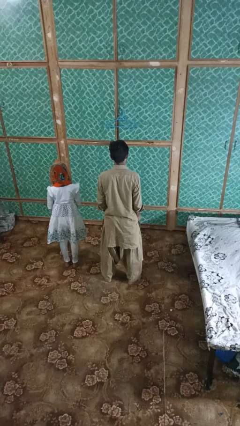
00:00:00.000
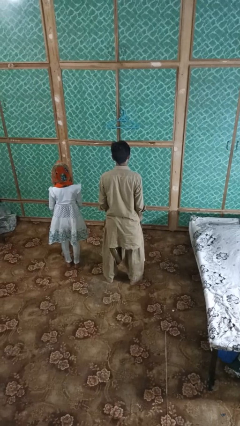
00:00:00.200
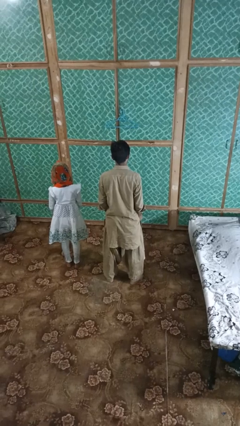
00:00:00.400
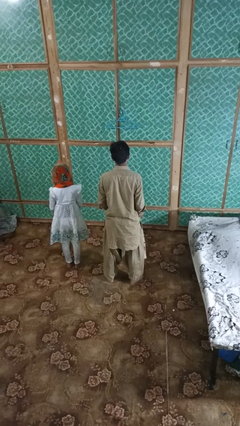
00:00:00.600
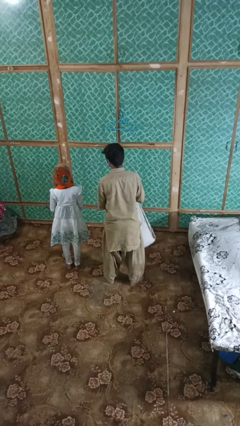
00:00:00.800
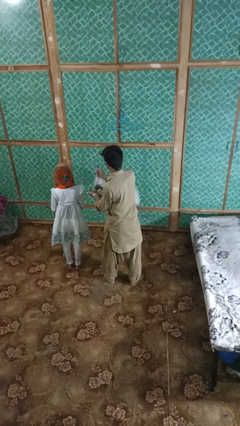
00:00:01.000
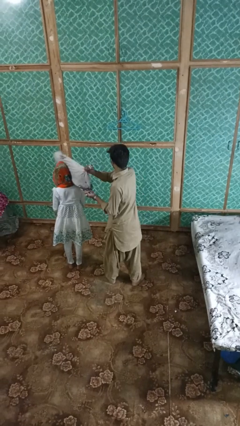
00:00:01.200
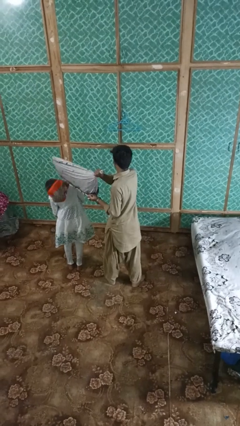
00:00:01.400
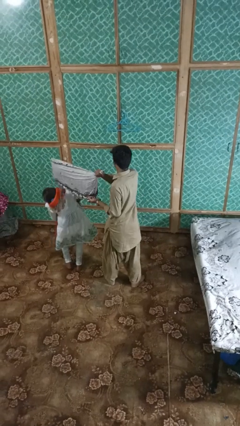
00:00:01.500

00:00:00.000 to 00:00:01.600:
person hits person with pillow

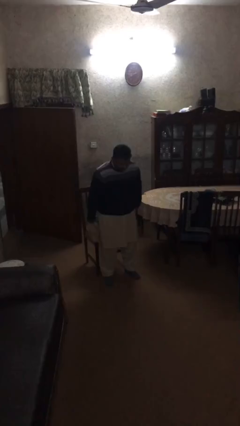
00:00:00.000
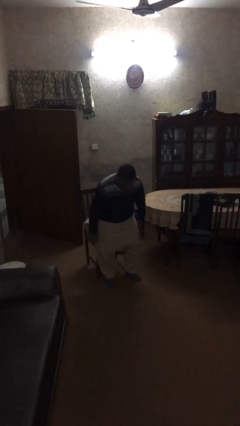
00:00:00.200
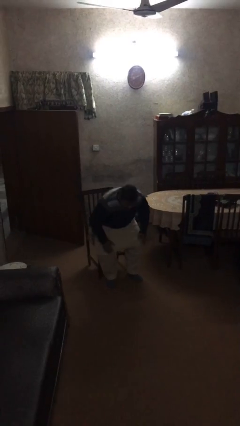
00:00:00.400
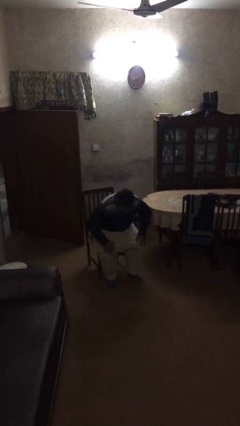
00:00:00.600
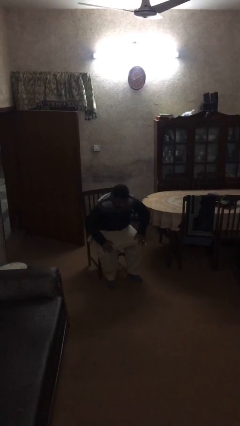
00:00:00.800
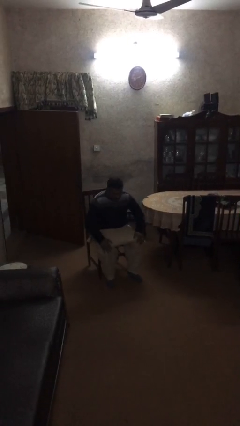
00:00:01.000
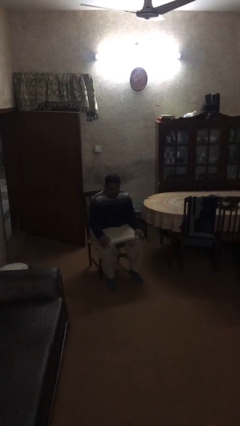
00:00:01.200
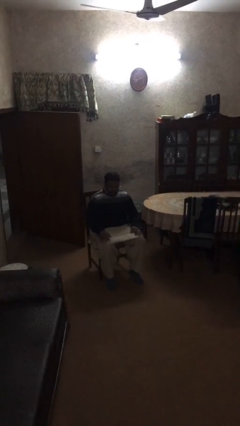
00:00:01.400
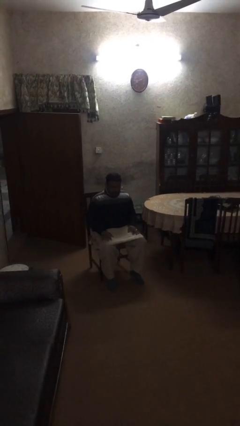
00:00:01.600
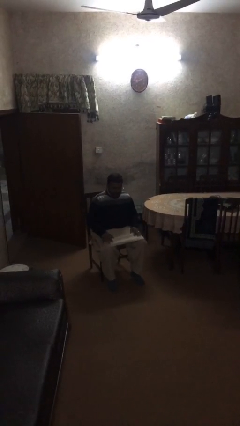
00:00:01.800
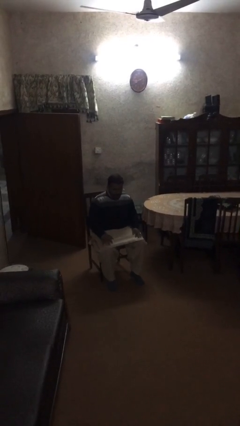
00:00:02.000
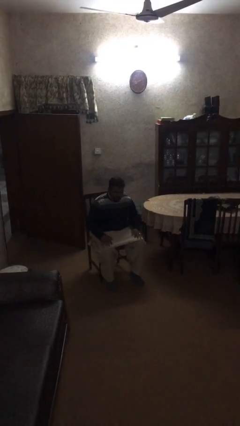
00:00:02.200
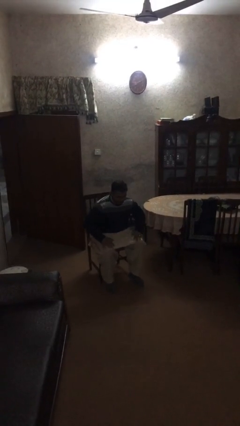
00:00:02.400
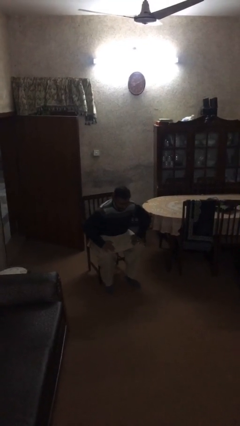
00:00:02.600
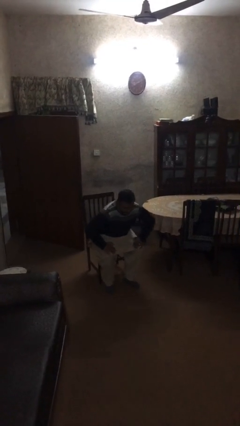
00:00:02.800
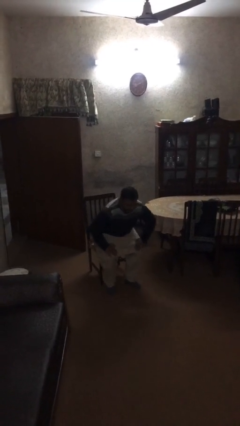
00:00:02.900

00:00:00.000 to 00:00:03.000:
person sits down

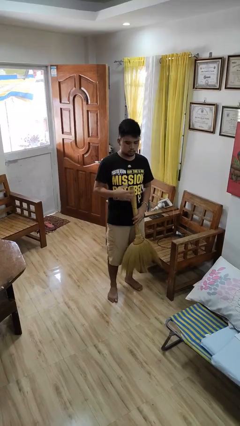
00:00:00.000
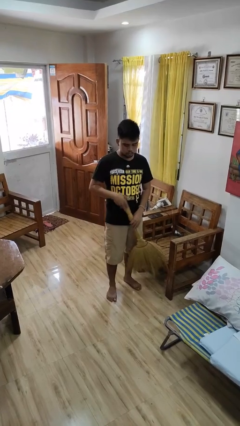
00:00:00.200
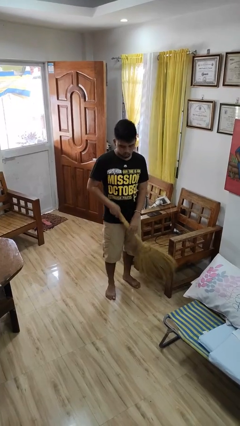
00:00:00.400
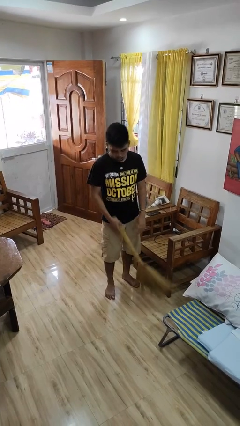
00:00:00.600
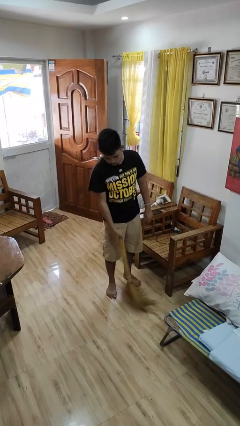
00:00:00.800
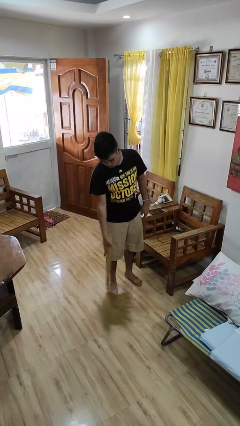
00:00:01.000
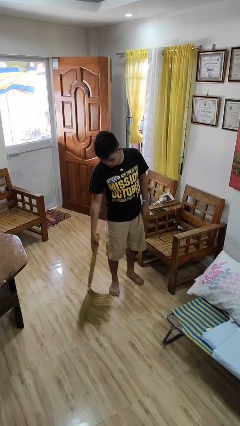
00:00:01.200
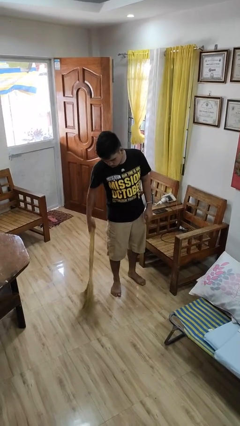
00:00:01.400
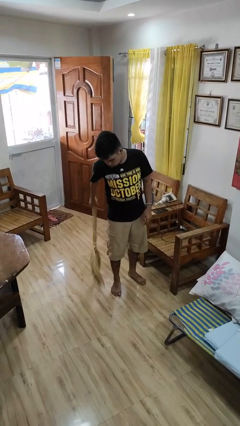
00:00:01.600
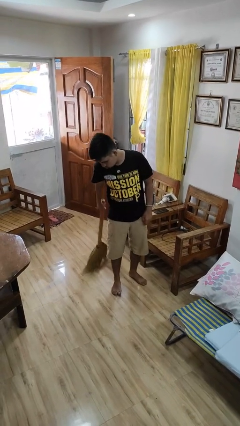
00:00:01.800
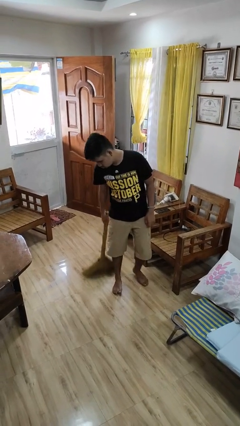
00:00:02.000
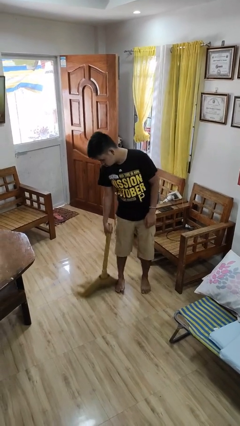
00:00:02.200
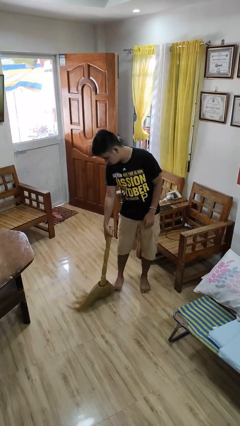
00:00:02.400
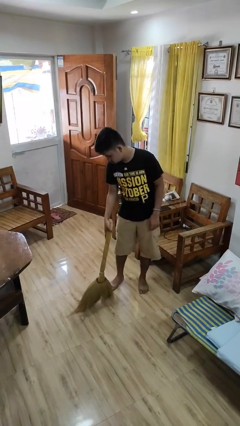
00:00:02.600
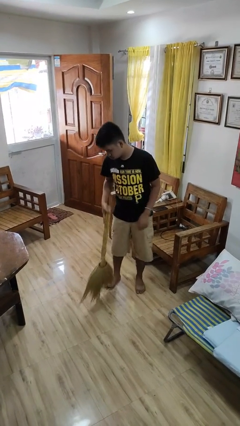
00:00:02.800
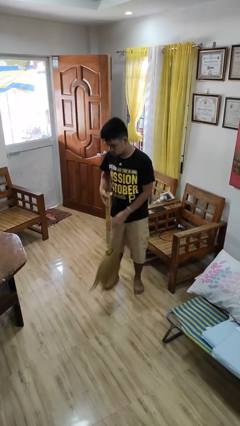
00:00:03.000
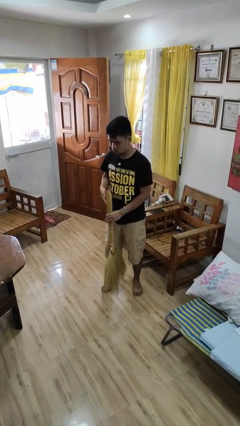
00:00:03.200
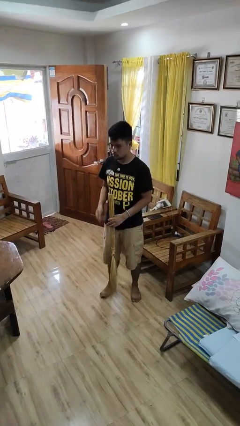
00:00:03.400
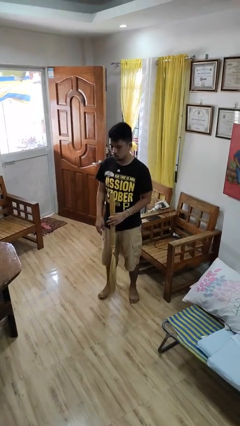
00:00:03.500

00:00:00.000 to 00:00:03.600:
person sweeps floor

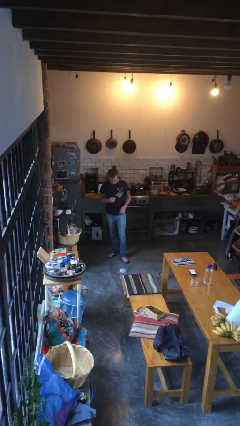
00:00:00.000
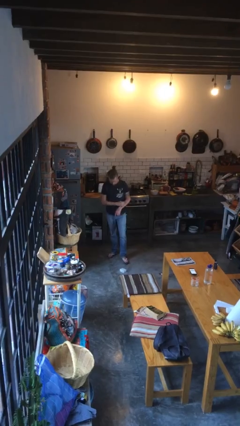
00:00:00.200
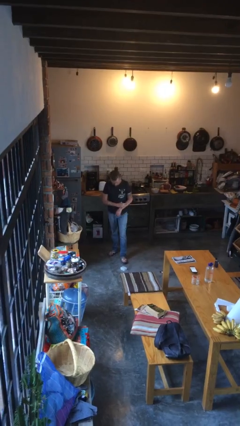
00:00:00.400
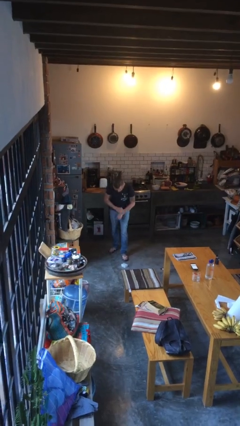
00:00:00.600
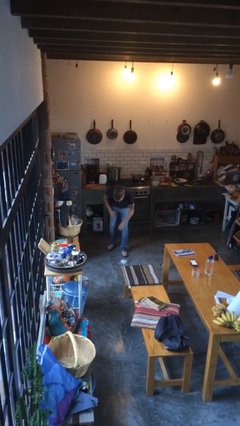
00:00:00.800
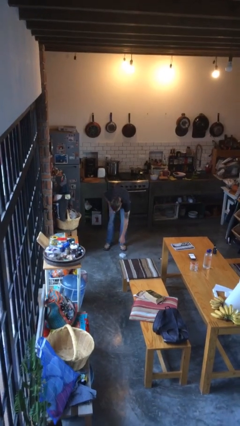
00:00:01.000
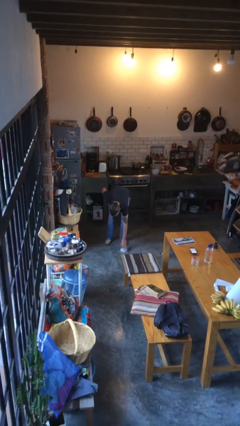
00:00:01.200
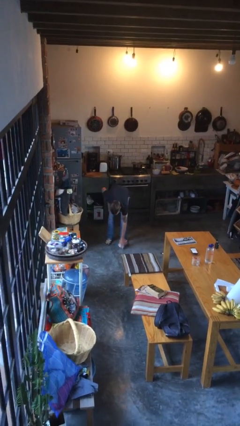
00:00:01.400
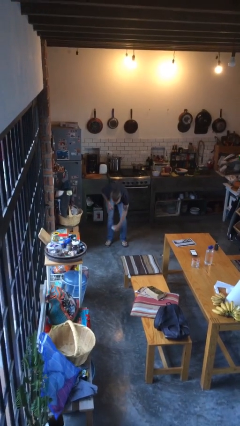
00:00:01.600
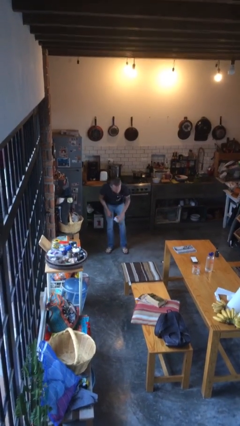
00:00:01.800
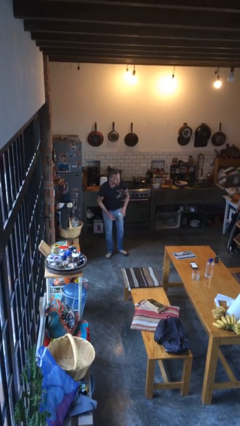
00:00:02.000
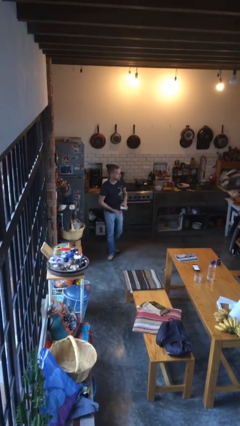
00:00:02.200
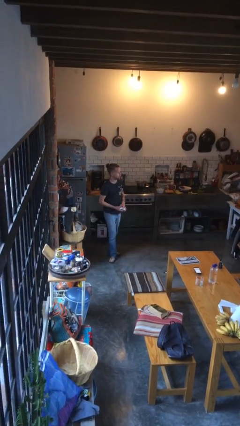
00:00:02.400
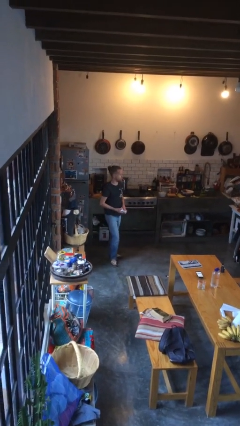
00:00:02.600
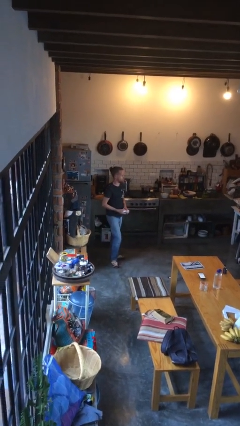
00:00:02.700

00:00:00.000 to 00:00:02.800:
person picks up object from floor

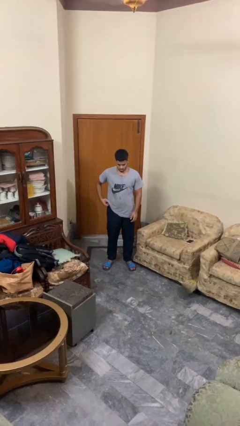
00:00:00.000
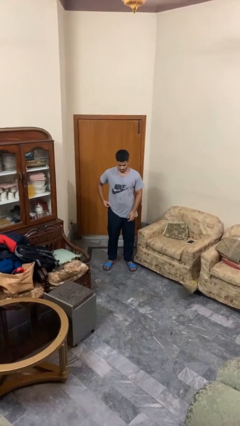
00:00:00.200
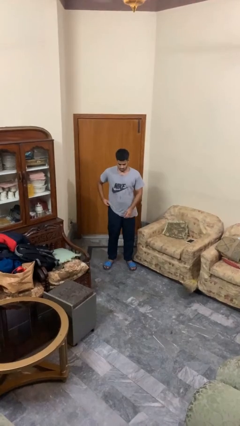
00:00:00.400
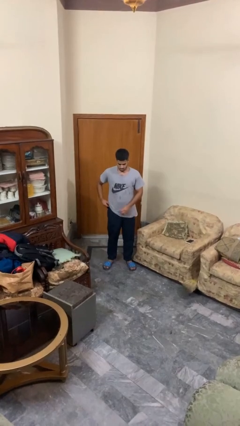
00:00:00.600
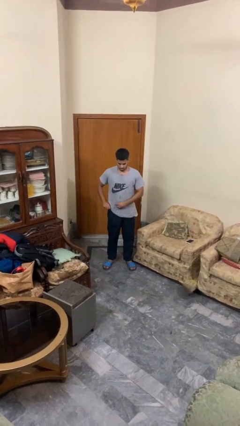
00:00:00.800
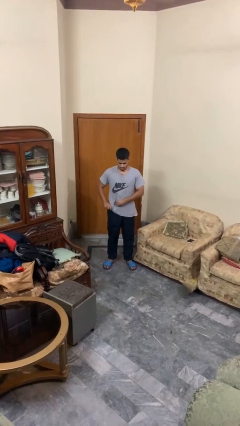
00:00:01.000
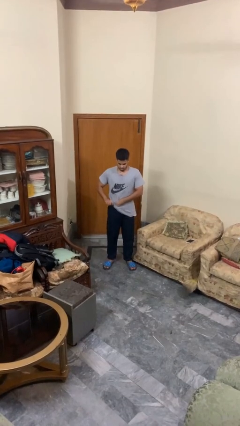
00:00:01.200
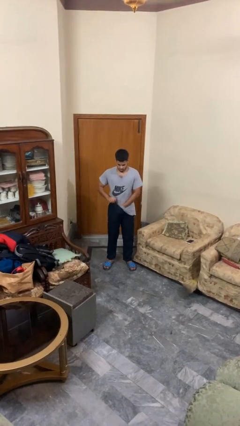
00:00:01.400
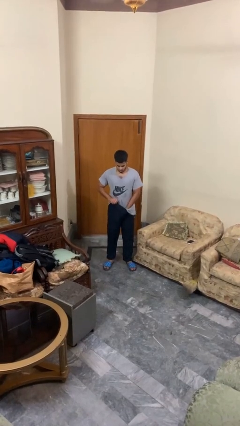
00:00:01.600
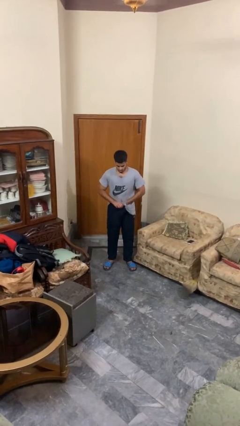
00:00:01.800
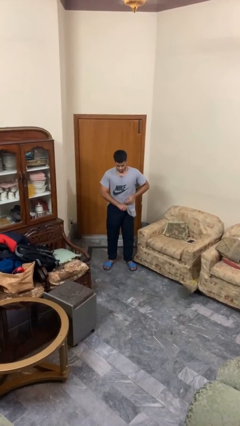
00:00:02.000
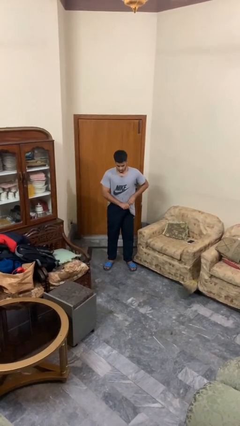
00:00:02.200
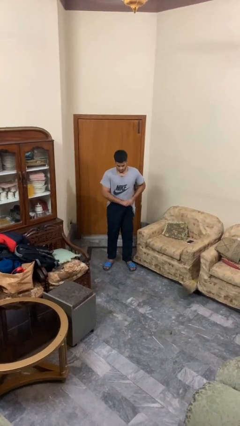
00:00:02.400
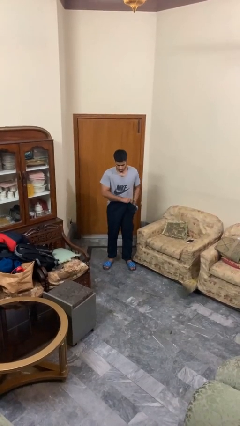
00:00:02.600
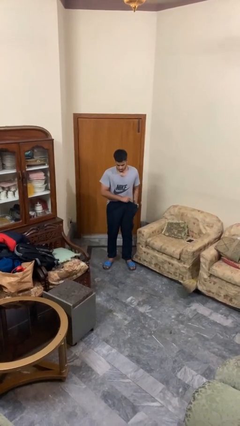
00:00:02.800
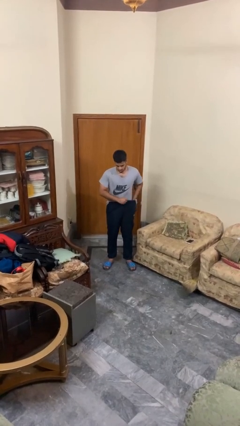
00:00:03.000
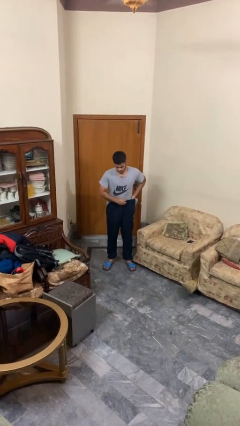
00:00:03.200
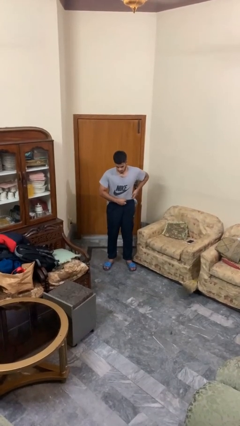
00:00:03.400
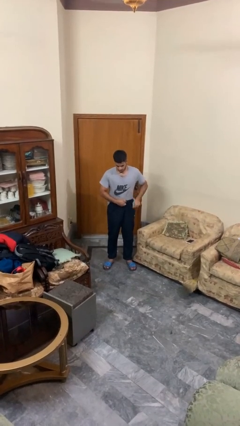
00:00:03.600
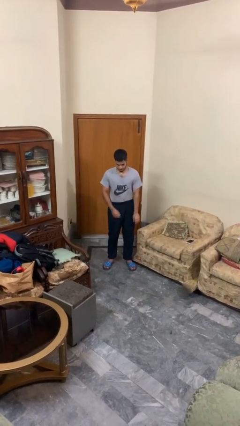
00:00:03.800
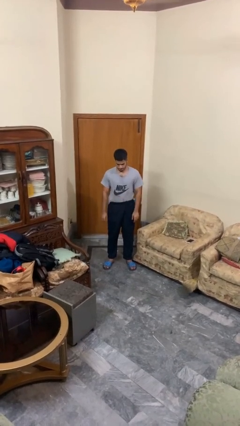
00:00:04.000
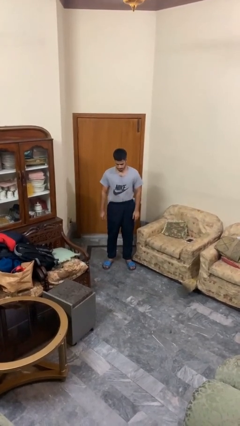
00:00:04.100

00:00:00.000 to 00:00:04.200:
person tucks in shirt

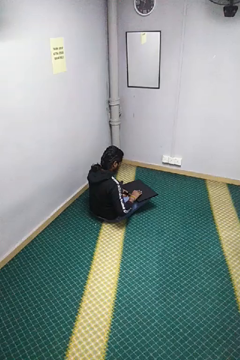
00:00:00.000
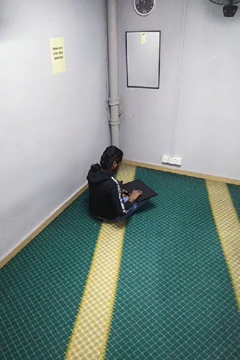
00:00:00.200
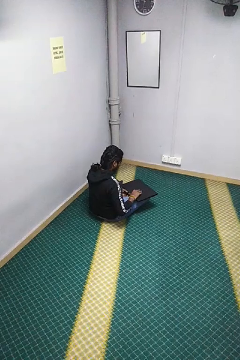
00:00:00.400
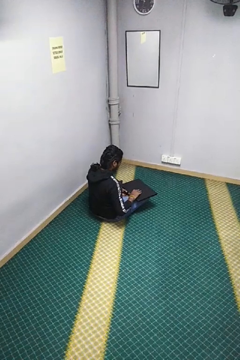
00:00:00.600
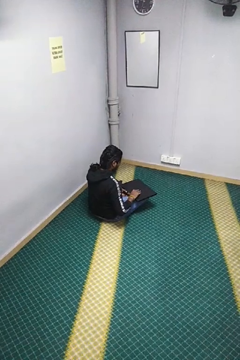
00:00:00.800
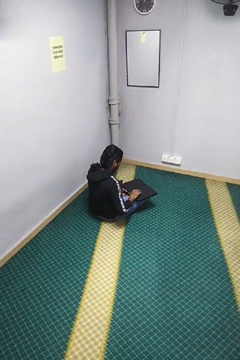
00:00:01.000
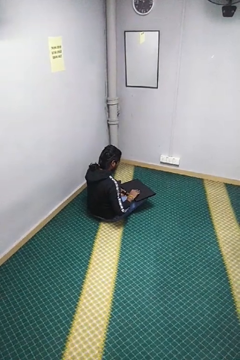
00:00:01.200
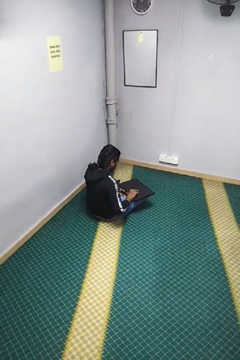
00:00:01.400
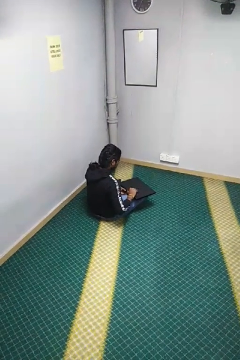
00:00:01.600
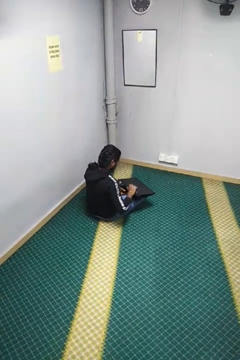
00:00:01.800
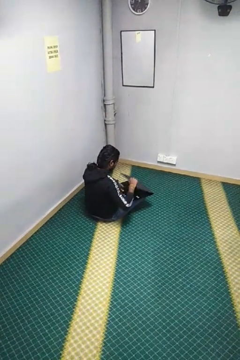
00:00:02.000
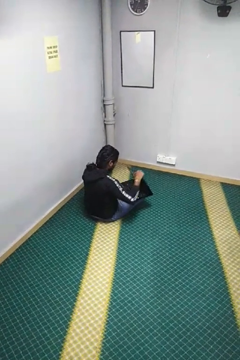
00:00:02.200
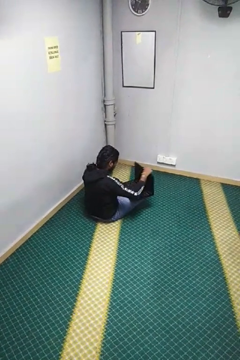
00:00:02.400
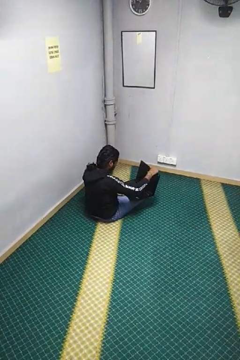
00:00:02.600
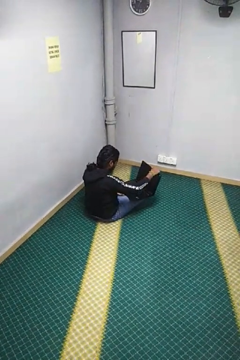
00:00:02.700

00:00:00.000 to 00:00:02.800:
person opens laptop
